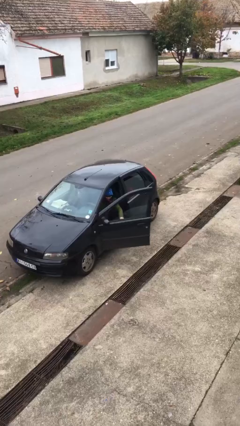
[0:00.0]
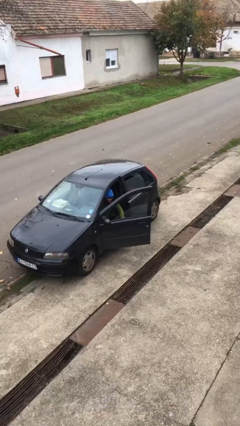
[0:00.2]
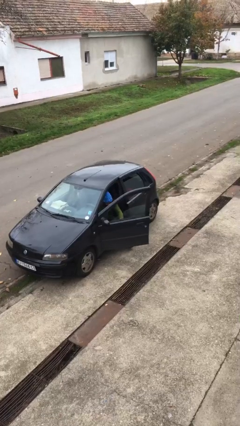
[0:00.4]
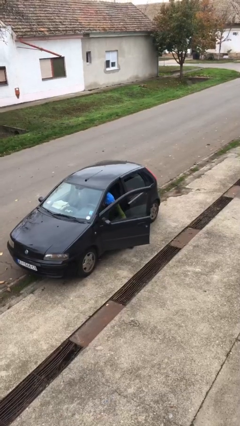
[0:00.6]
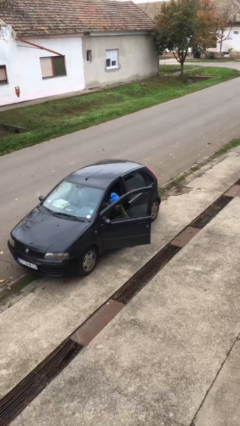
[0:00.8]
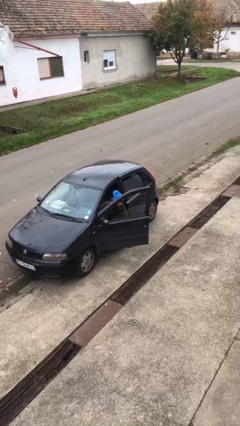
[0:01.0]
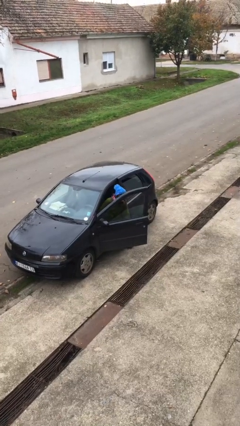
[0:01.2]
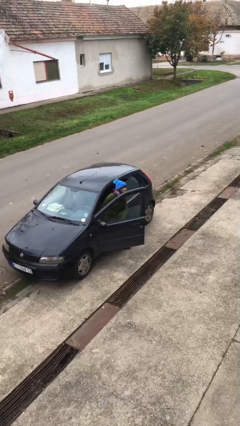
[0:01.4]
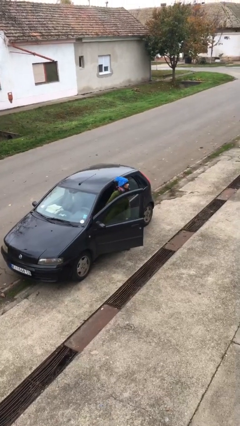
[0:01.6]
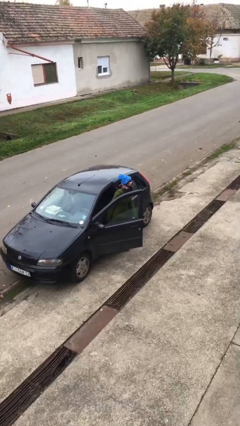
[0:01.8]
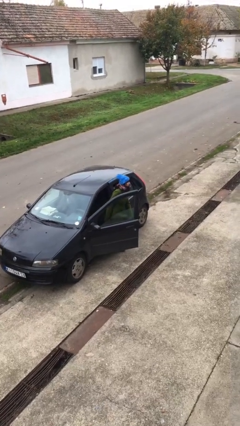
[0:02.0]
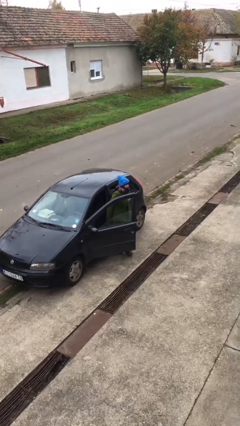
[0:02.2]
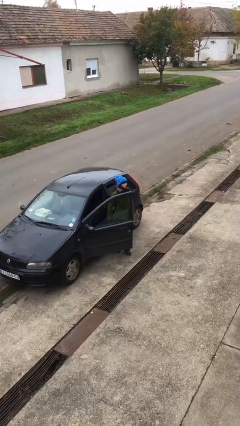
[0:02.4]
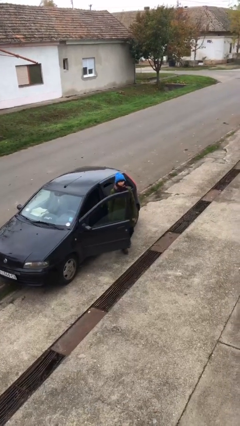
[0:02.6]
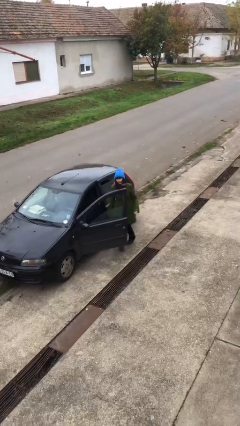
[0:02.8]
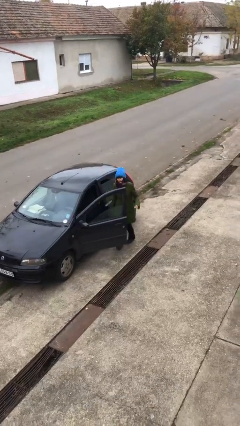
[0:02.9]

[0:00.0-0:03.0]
person exits car

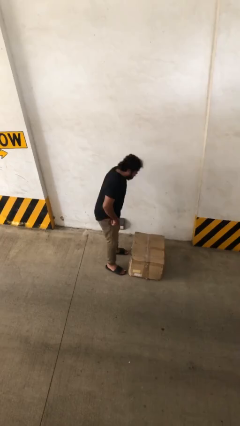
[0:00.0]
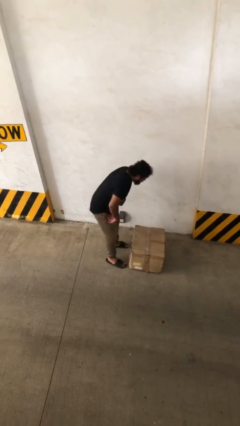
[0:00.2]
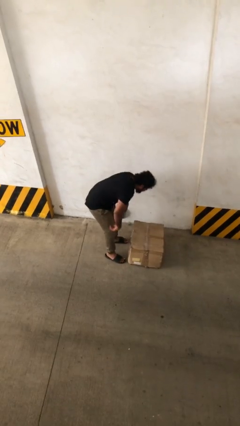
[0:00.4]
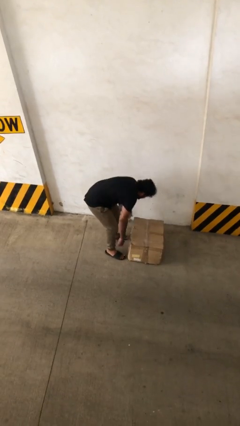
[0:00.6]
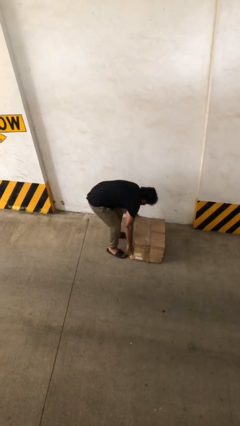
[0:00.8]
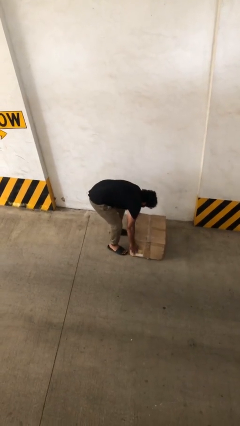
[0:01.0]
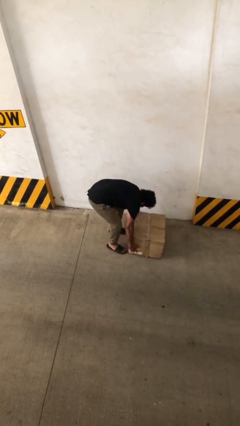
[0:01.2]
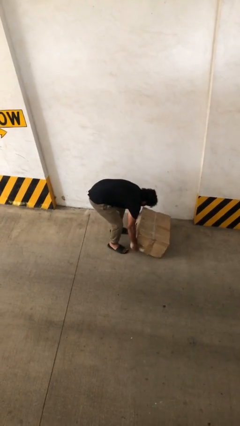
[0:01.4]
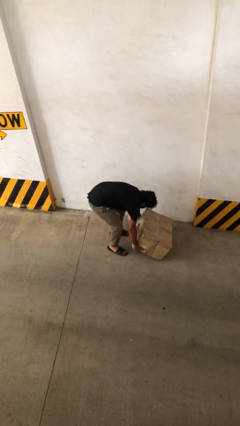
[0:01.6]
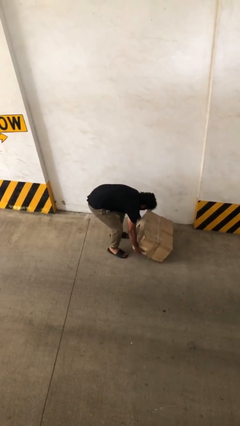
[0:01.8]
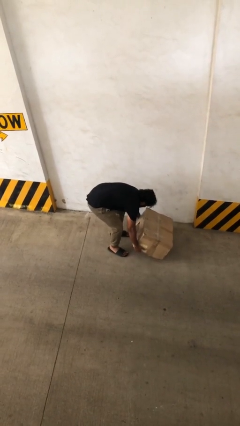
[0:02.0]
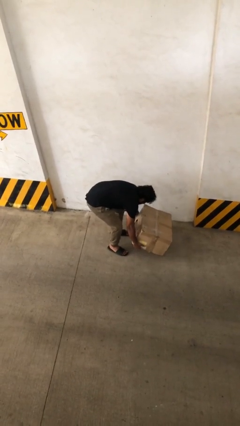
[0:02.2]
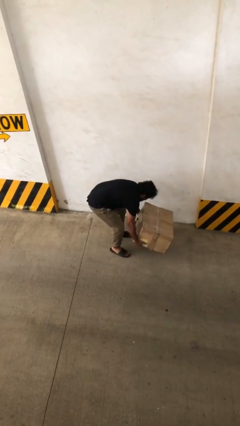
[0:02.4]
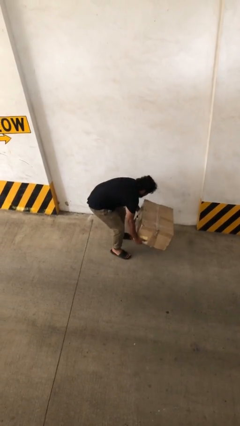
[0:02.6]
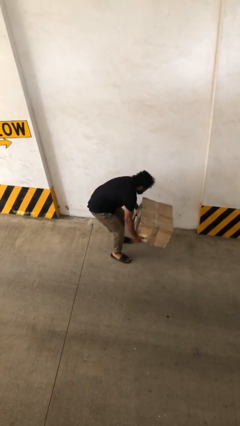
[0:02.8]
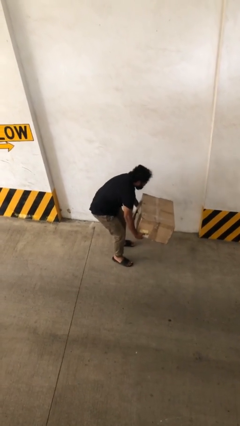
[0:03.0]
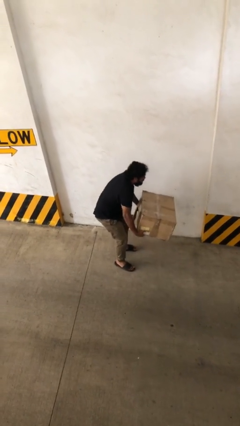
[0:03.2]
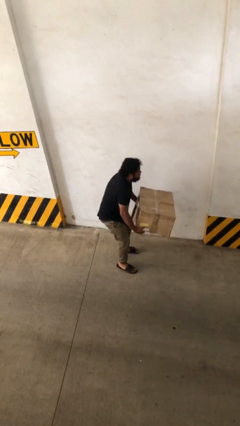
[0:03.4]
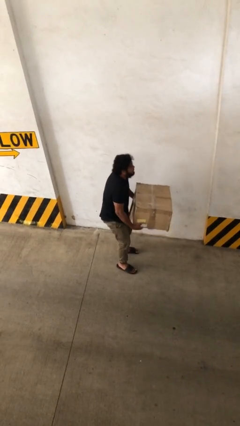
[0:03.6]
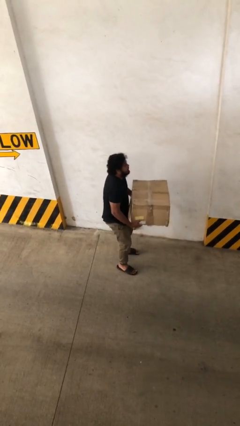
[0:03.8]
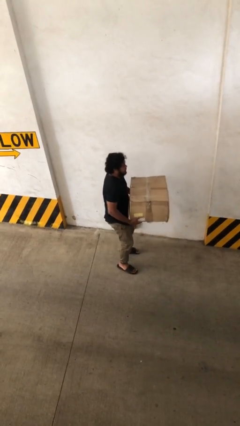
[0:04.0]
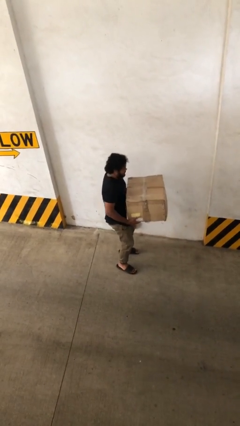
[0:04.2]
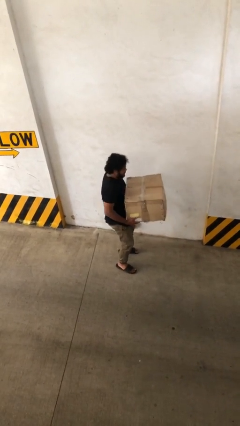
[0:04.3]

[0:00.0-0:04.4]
person picks up object from floor

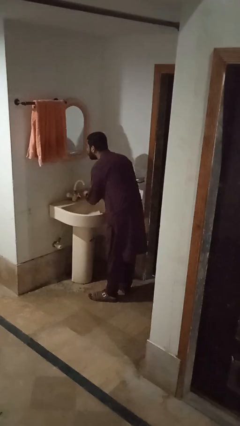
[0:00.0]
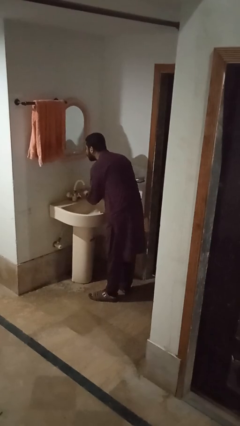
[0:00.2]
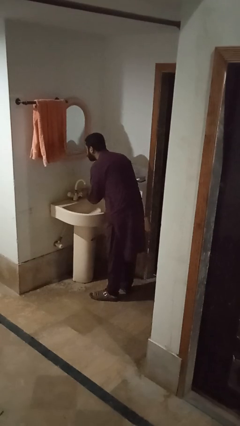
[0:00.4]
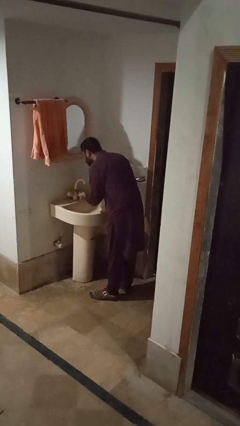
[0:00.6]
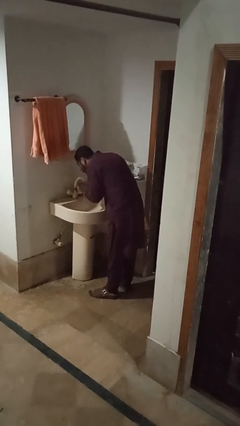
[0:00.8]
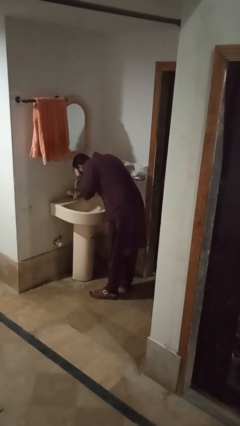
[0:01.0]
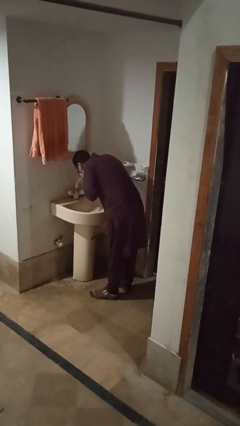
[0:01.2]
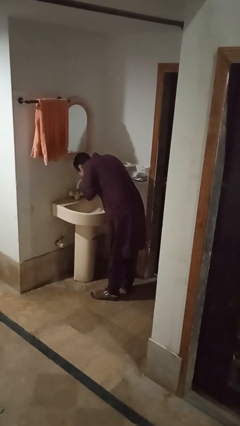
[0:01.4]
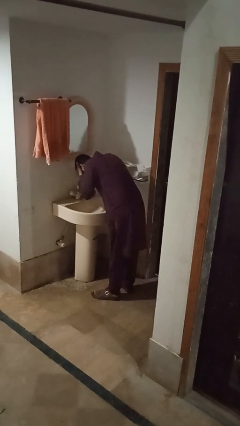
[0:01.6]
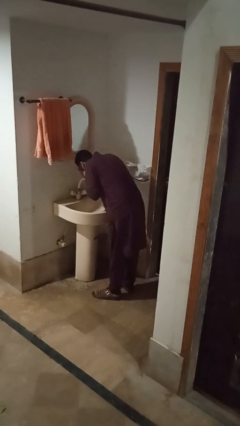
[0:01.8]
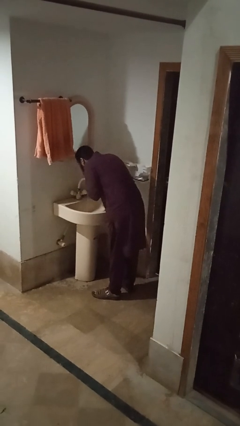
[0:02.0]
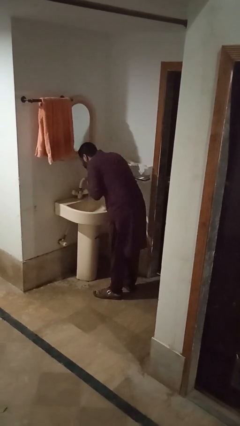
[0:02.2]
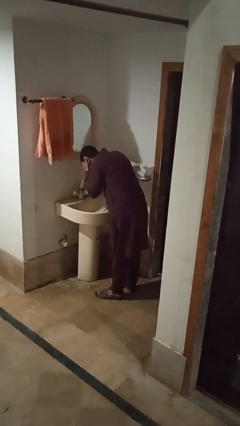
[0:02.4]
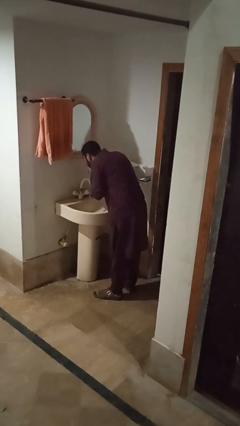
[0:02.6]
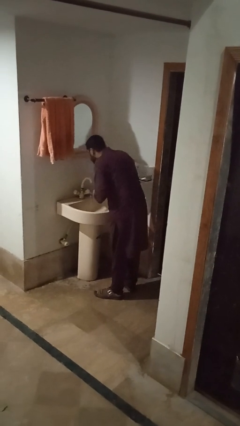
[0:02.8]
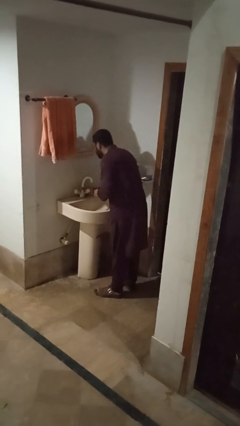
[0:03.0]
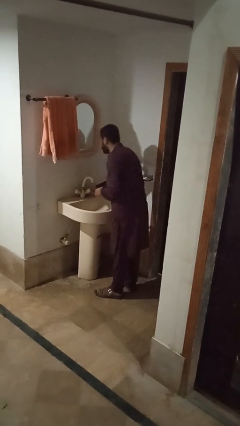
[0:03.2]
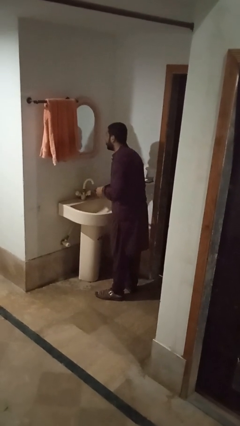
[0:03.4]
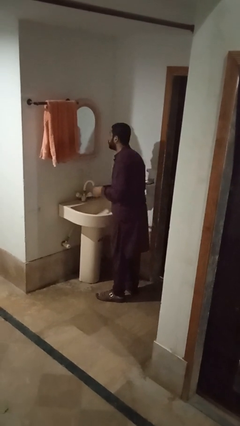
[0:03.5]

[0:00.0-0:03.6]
person washes face

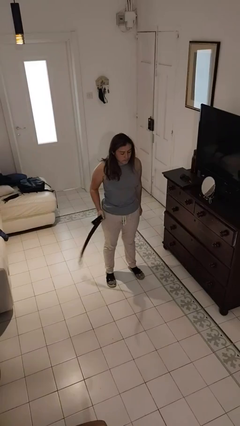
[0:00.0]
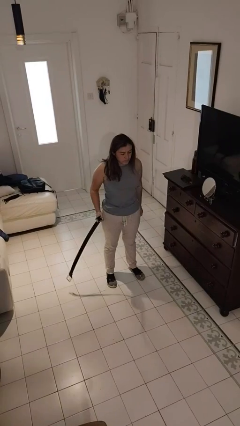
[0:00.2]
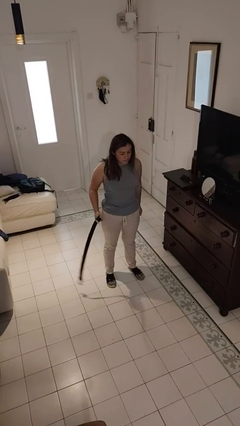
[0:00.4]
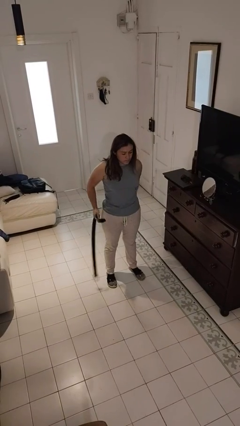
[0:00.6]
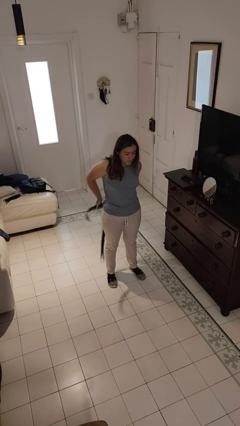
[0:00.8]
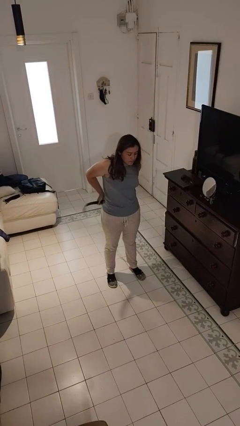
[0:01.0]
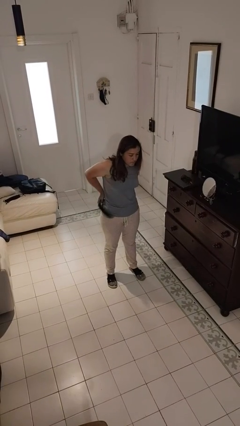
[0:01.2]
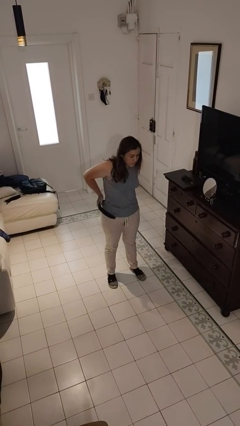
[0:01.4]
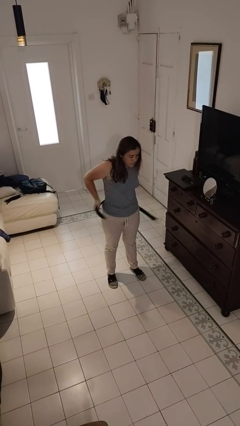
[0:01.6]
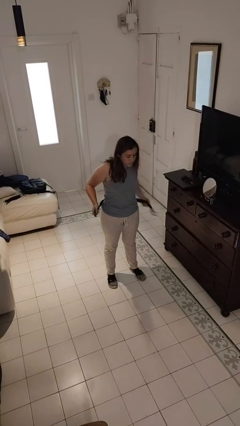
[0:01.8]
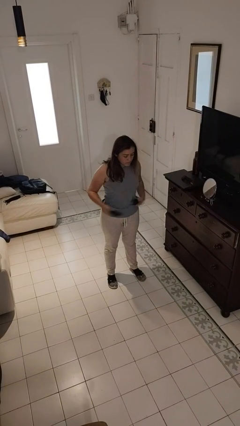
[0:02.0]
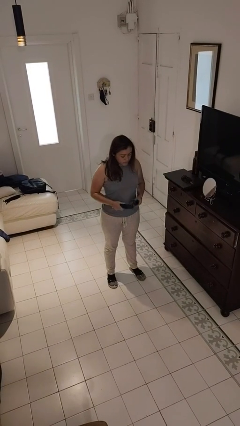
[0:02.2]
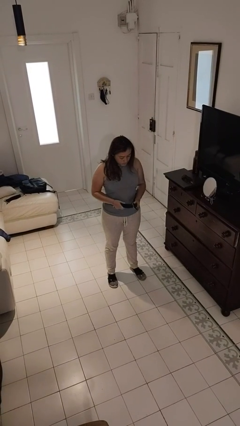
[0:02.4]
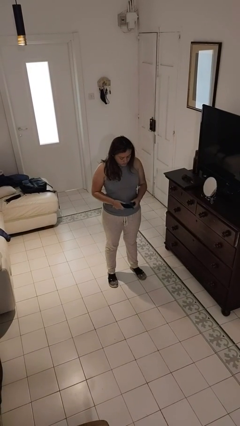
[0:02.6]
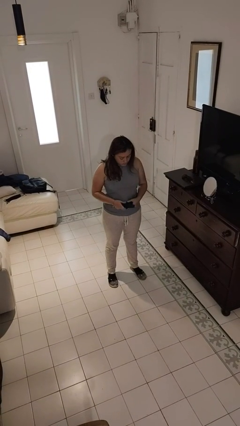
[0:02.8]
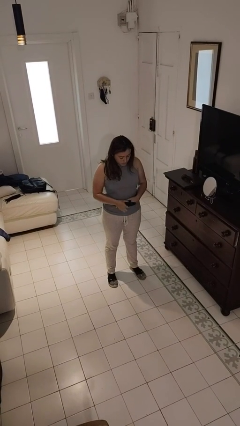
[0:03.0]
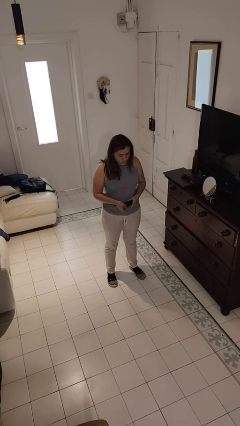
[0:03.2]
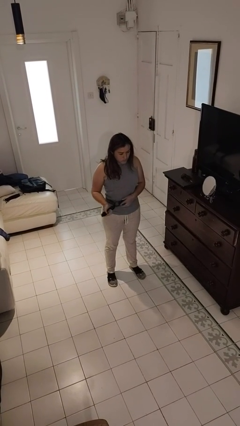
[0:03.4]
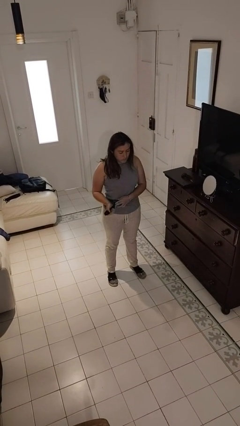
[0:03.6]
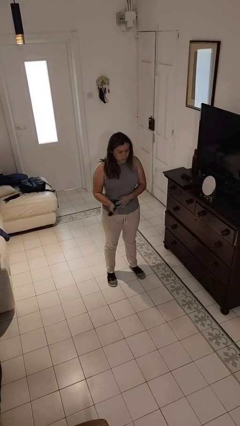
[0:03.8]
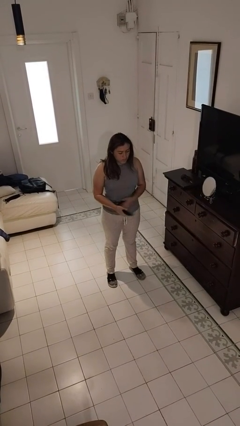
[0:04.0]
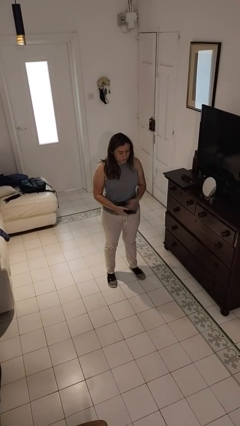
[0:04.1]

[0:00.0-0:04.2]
person puts on belt

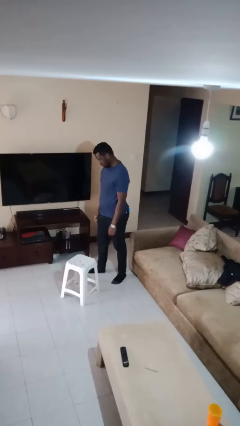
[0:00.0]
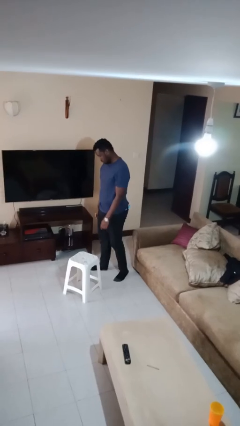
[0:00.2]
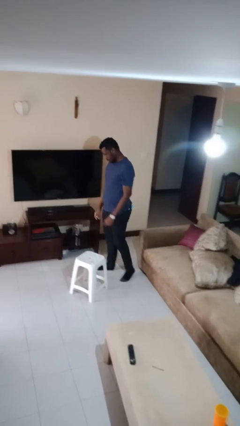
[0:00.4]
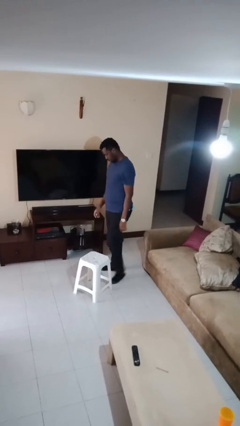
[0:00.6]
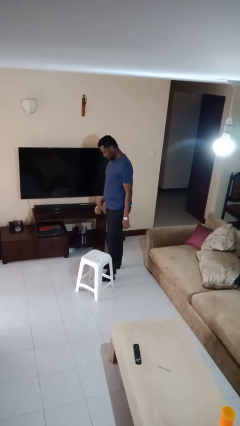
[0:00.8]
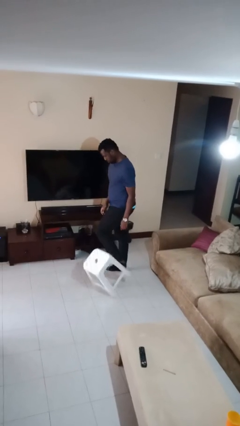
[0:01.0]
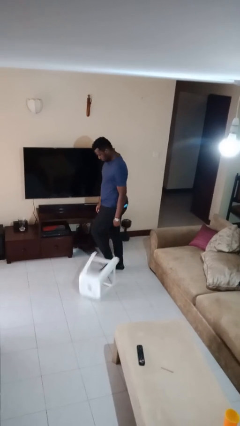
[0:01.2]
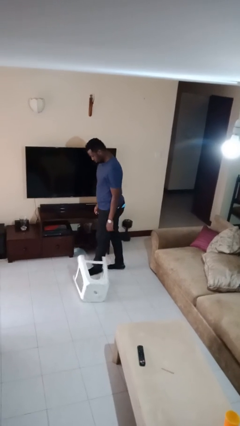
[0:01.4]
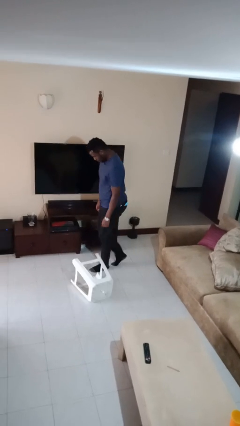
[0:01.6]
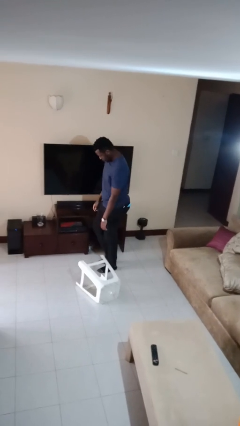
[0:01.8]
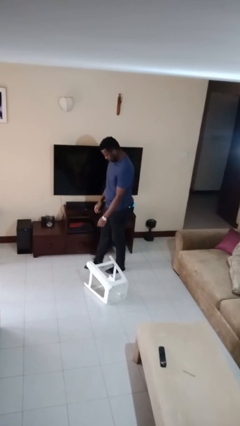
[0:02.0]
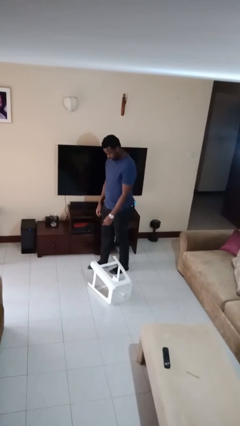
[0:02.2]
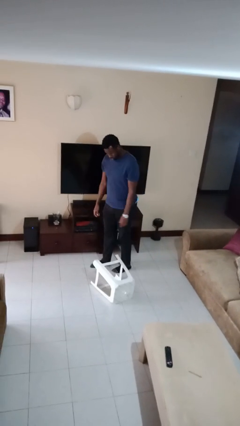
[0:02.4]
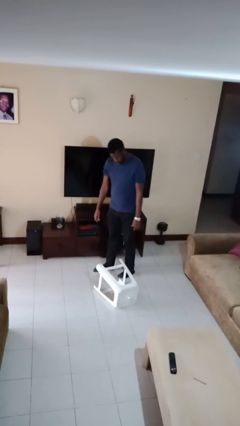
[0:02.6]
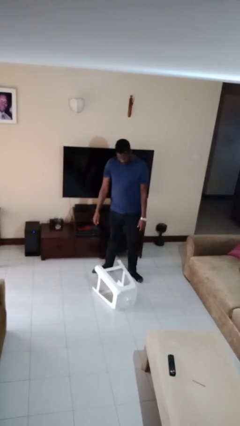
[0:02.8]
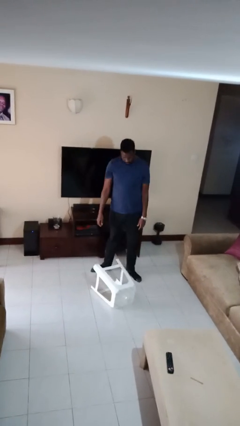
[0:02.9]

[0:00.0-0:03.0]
person knocks over furniture
